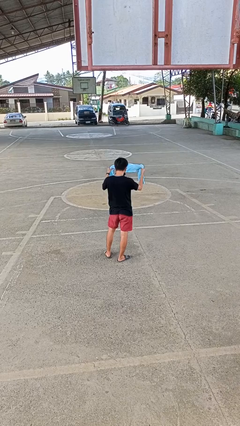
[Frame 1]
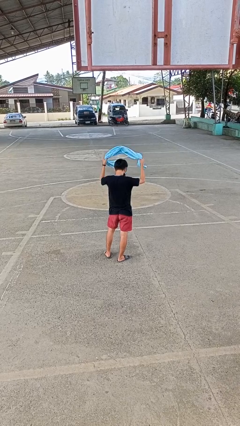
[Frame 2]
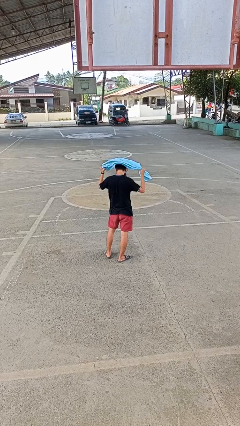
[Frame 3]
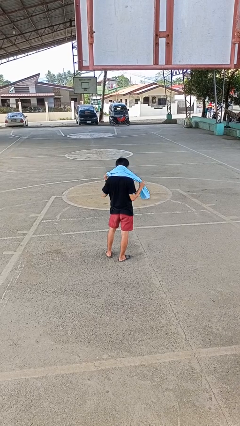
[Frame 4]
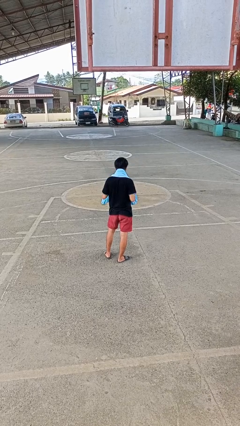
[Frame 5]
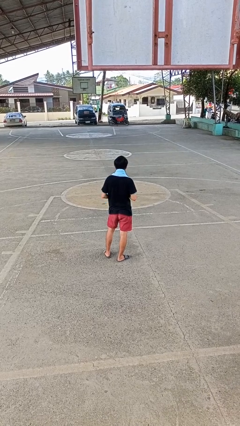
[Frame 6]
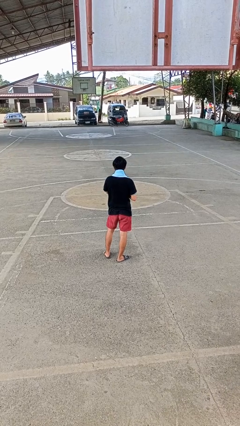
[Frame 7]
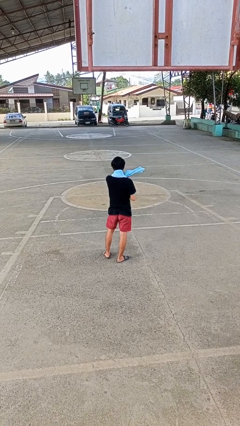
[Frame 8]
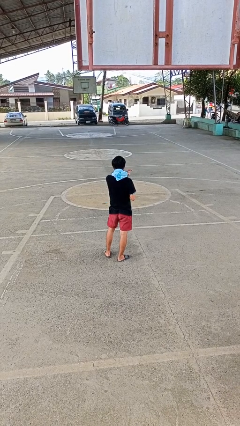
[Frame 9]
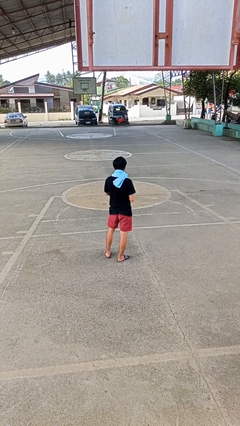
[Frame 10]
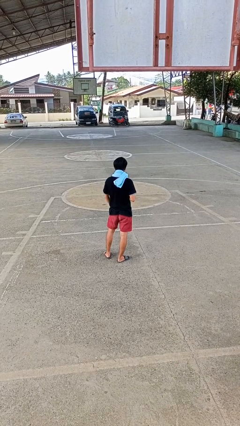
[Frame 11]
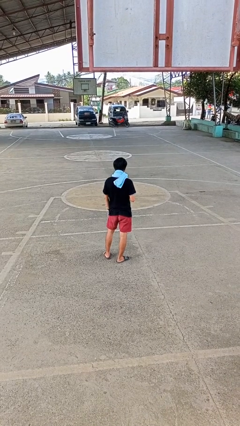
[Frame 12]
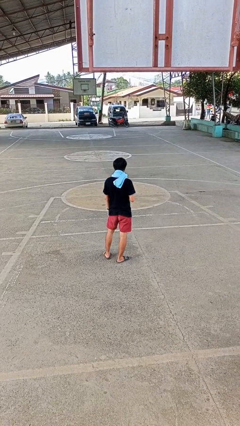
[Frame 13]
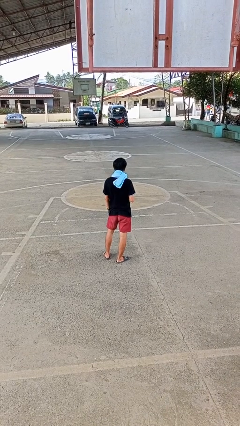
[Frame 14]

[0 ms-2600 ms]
person puts on scarf

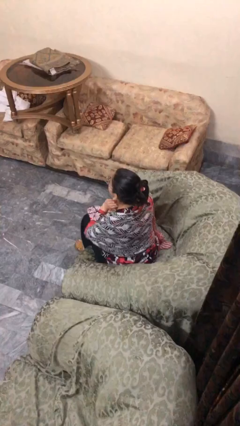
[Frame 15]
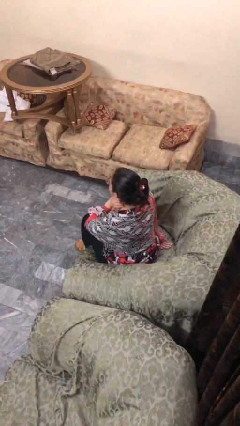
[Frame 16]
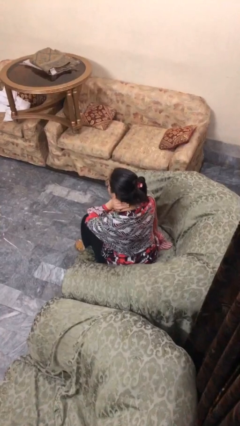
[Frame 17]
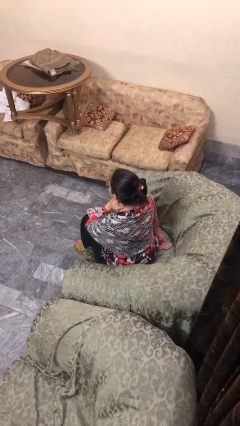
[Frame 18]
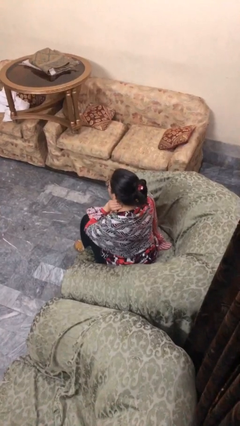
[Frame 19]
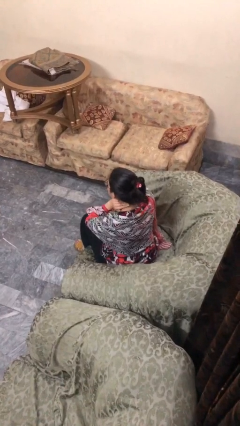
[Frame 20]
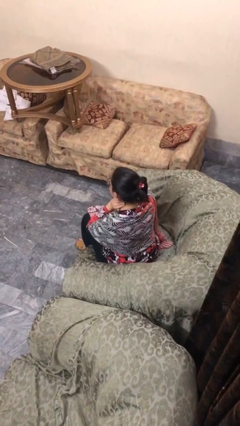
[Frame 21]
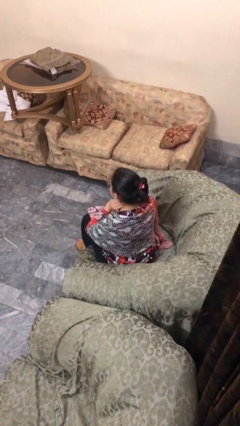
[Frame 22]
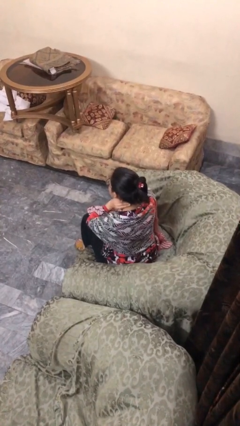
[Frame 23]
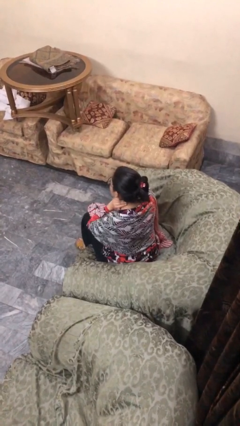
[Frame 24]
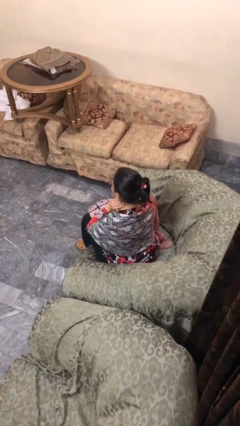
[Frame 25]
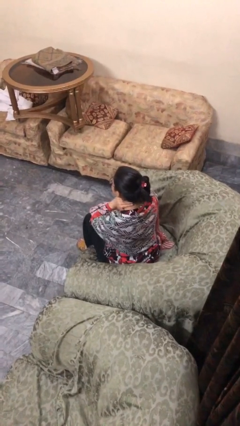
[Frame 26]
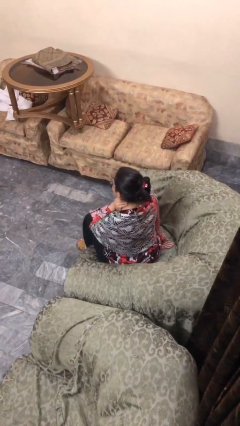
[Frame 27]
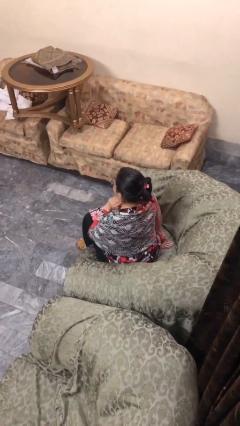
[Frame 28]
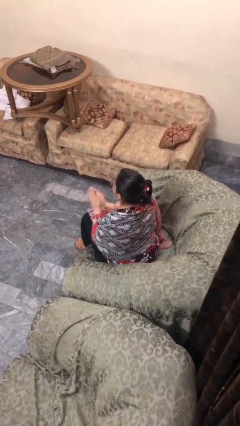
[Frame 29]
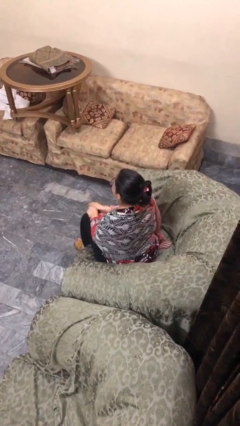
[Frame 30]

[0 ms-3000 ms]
person rubs neck

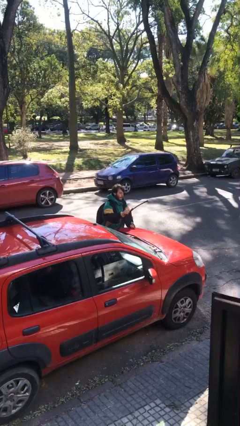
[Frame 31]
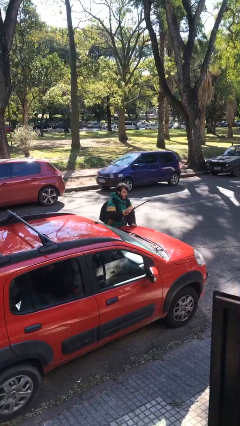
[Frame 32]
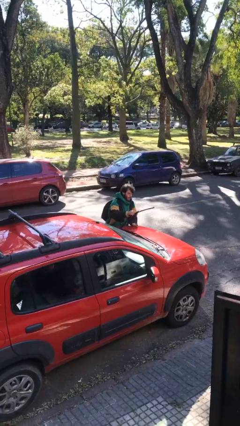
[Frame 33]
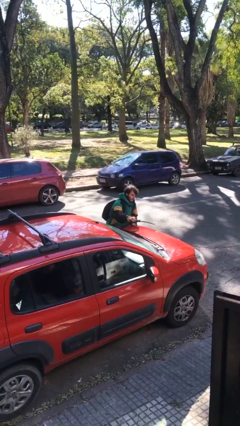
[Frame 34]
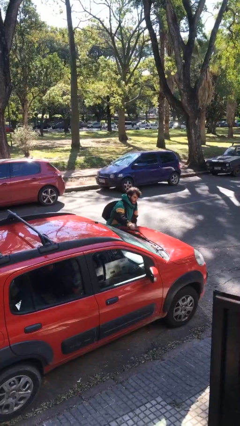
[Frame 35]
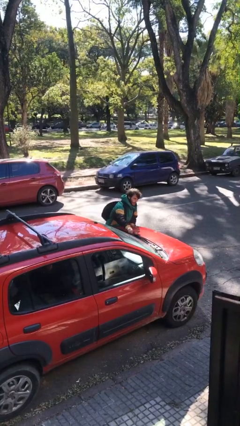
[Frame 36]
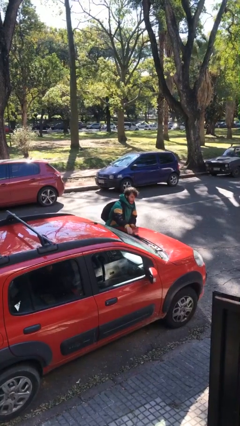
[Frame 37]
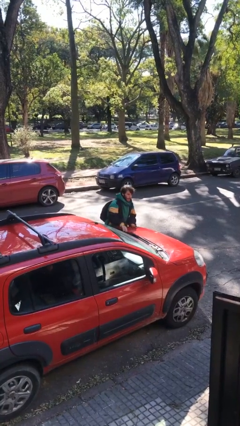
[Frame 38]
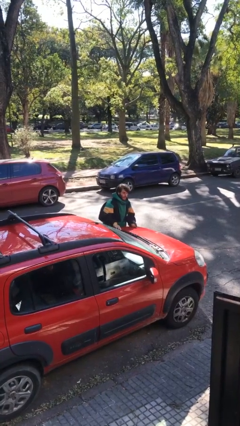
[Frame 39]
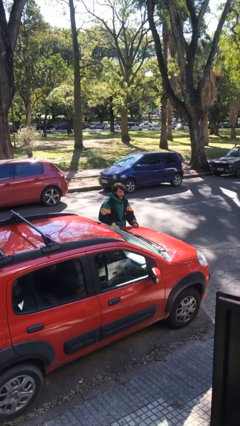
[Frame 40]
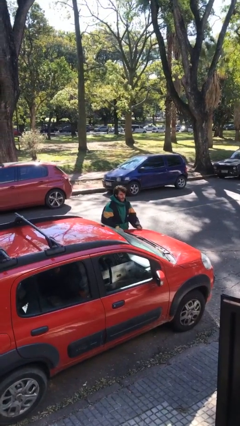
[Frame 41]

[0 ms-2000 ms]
person flips down car wipers

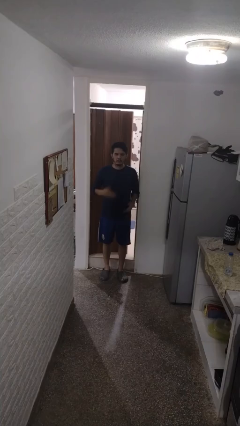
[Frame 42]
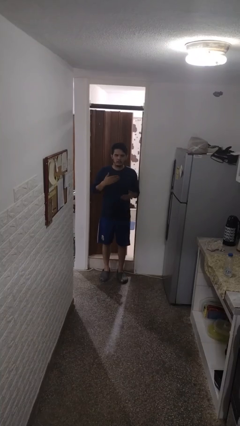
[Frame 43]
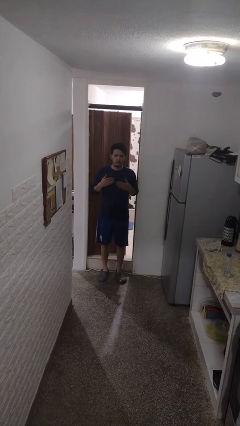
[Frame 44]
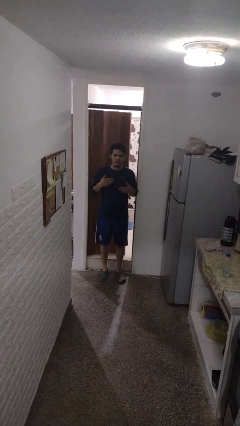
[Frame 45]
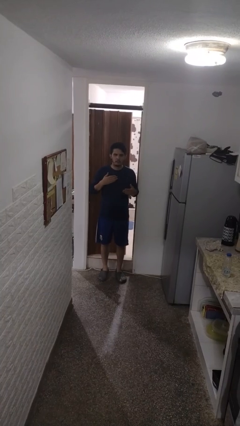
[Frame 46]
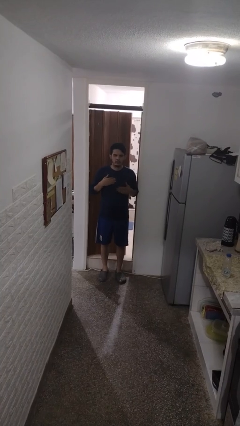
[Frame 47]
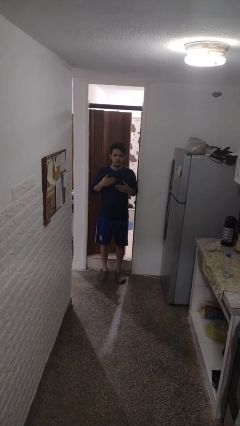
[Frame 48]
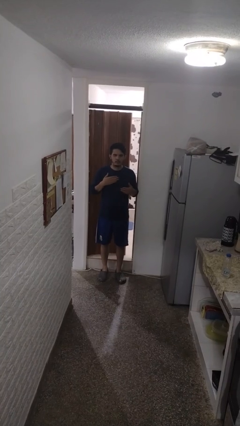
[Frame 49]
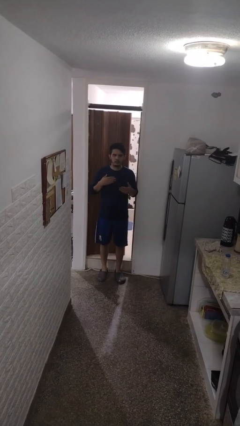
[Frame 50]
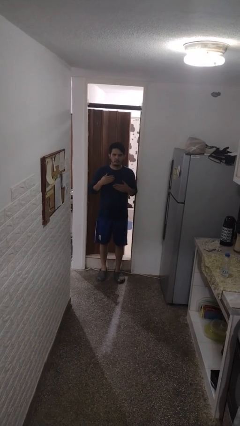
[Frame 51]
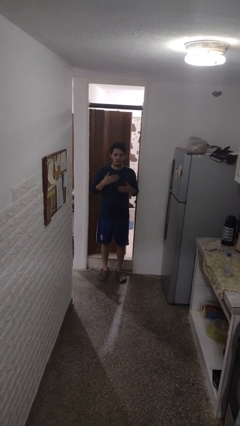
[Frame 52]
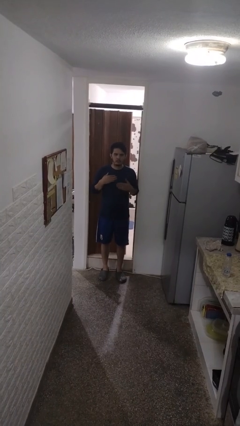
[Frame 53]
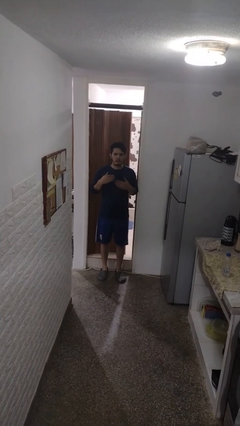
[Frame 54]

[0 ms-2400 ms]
person drums on chest

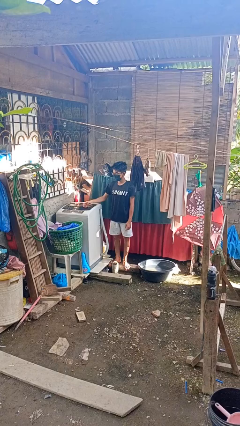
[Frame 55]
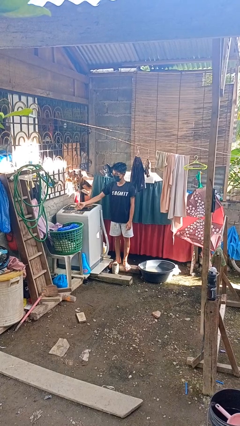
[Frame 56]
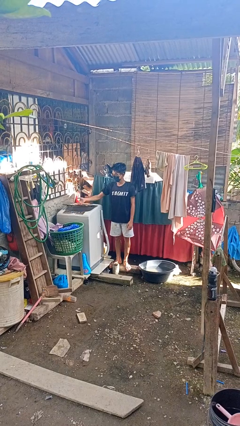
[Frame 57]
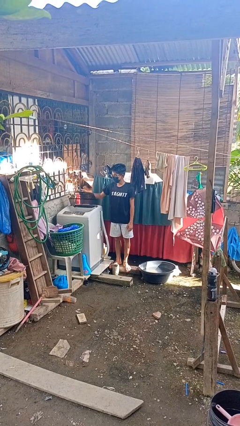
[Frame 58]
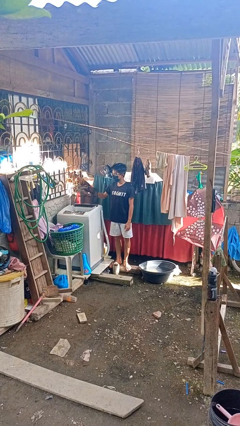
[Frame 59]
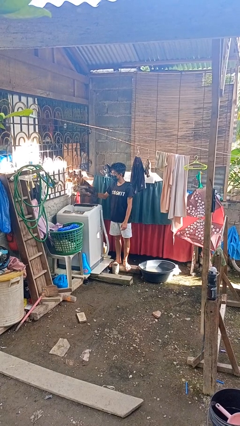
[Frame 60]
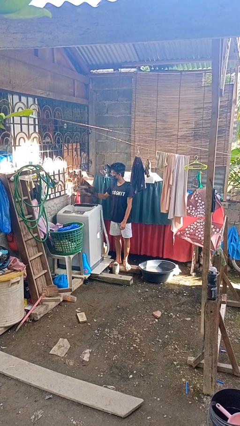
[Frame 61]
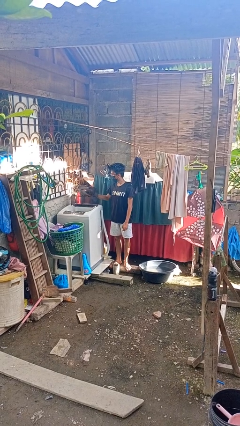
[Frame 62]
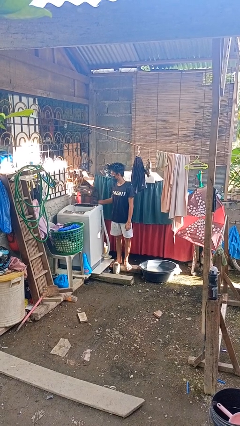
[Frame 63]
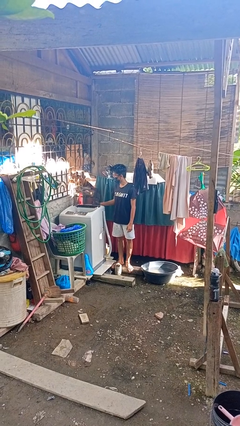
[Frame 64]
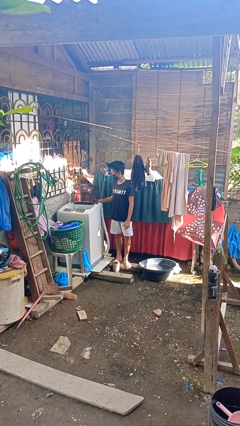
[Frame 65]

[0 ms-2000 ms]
person opens clothes washer

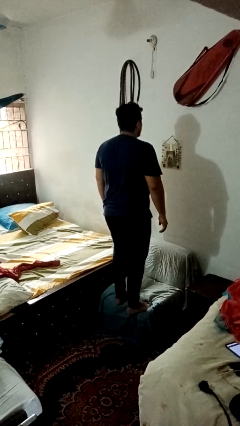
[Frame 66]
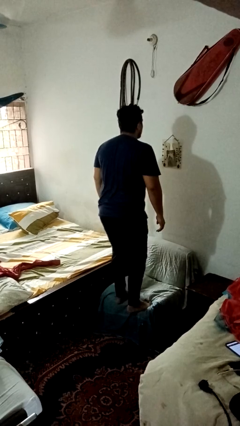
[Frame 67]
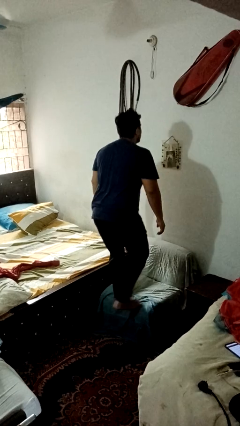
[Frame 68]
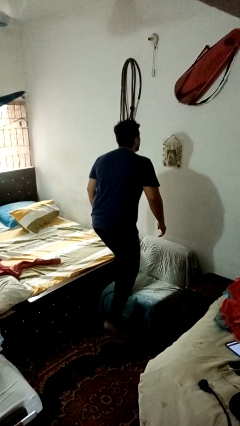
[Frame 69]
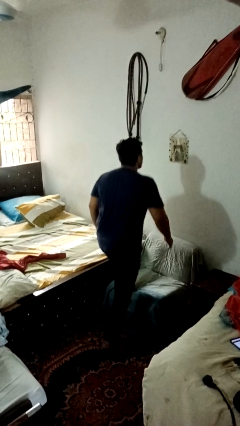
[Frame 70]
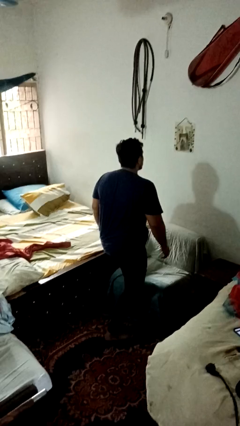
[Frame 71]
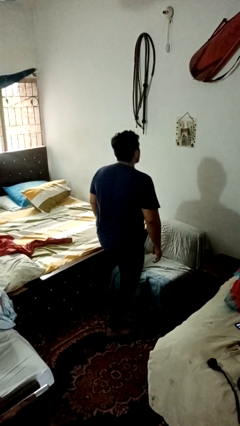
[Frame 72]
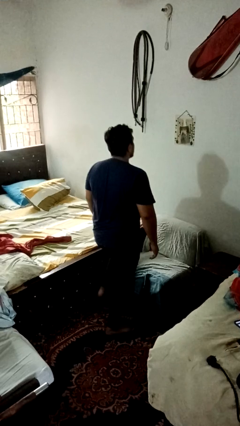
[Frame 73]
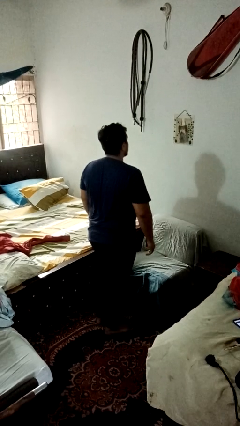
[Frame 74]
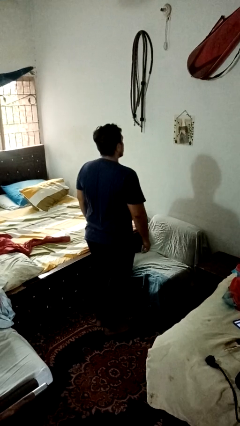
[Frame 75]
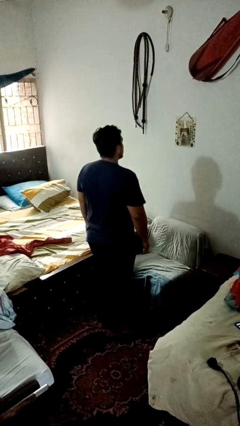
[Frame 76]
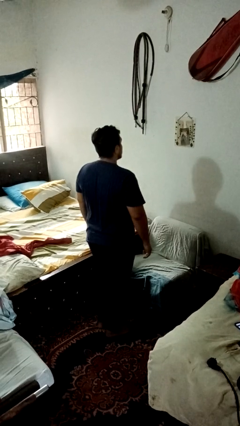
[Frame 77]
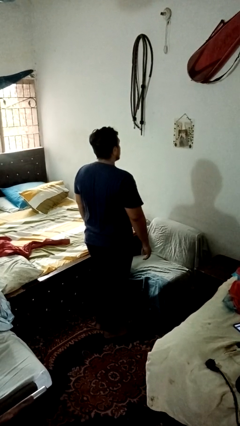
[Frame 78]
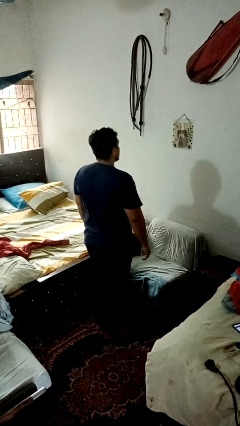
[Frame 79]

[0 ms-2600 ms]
person climbs off couch

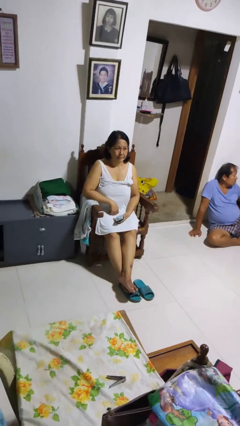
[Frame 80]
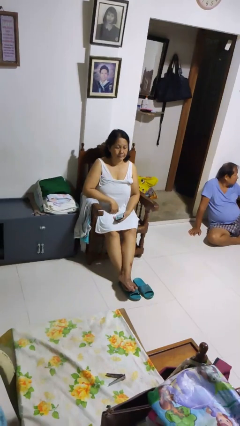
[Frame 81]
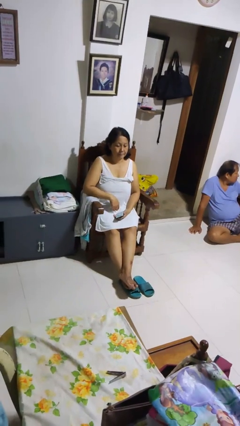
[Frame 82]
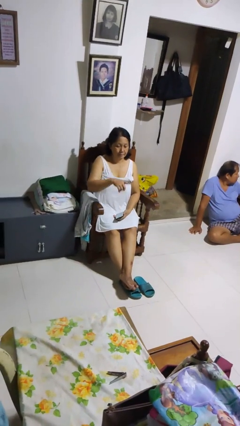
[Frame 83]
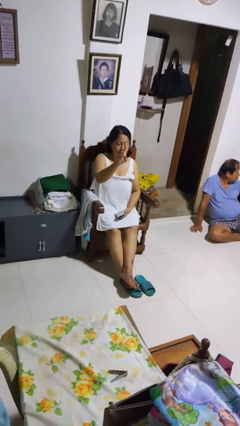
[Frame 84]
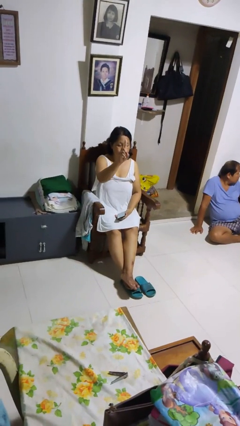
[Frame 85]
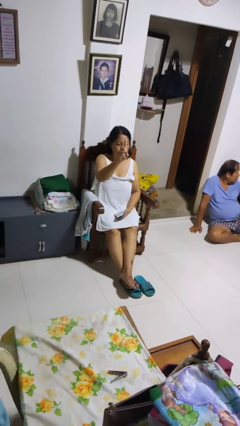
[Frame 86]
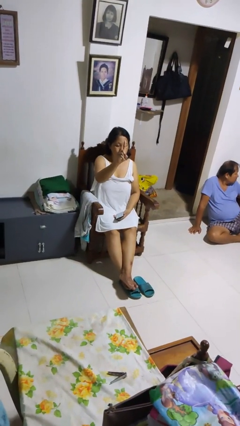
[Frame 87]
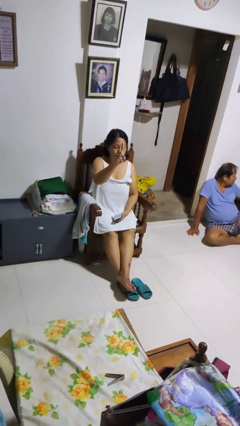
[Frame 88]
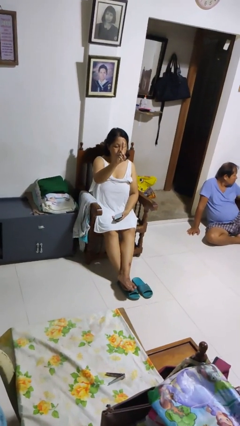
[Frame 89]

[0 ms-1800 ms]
person gestures number one

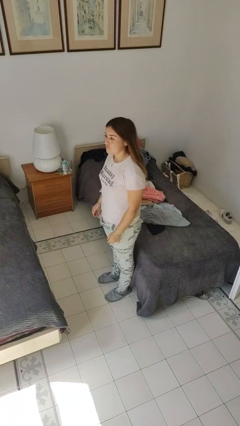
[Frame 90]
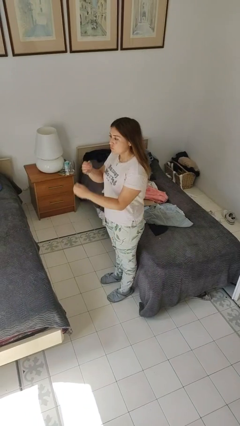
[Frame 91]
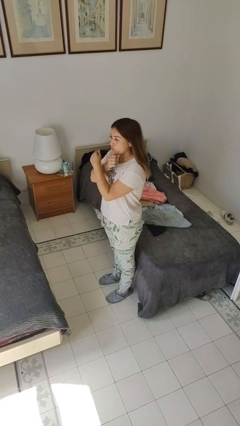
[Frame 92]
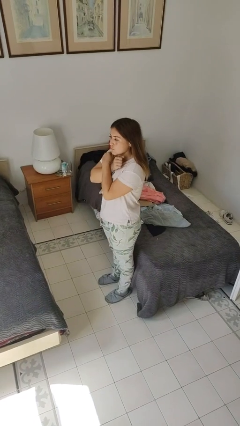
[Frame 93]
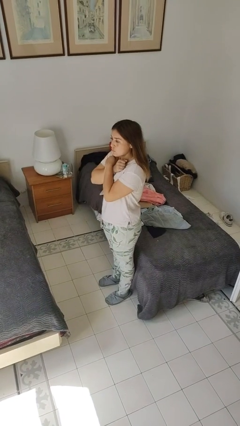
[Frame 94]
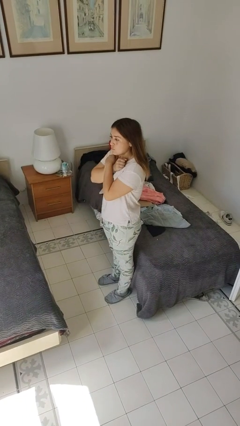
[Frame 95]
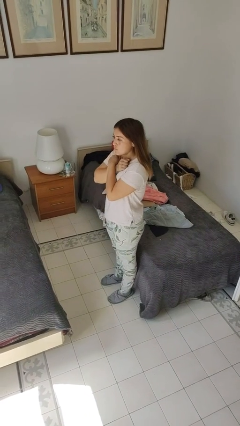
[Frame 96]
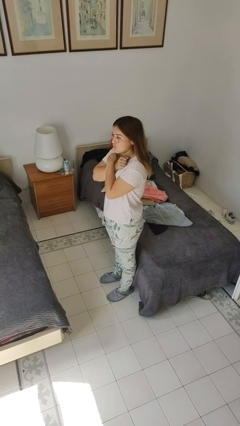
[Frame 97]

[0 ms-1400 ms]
person gestures arms x
